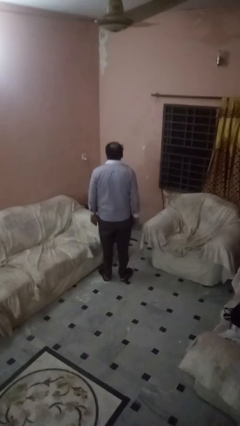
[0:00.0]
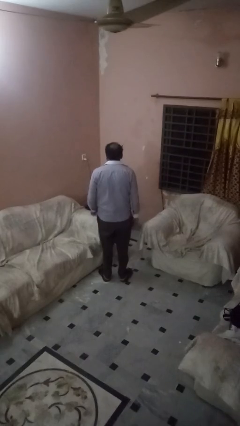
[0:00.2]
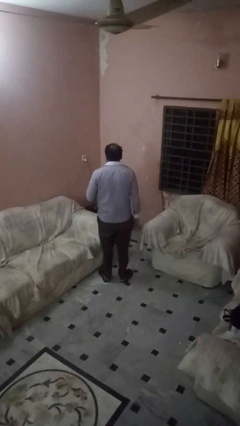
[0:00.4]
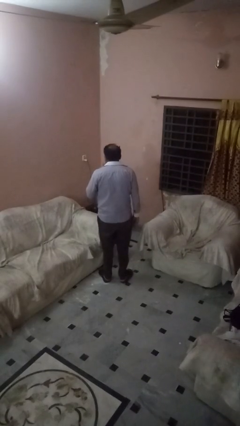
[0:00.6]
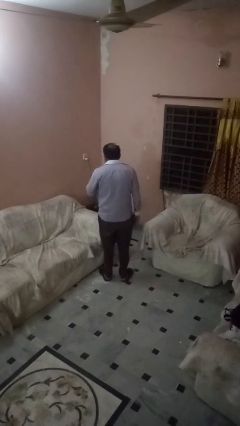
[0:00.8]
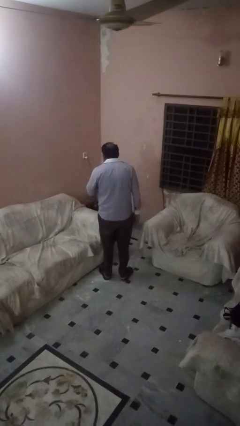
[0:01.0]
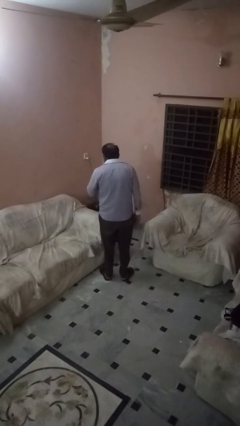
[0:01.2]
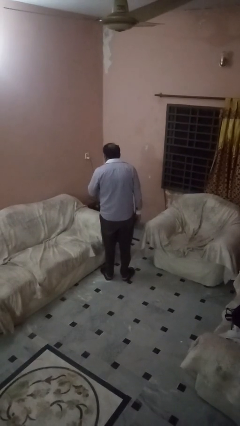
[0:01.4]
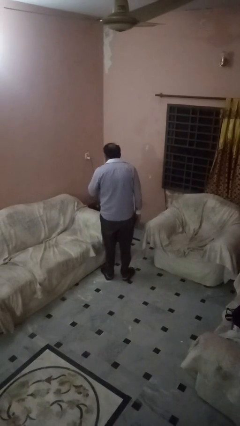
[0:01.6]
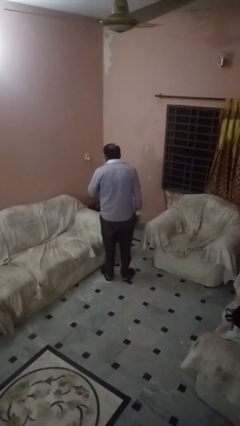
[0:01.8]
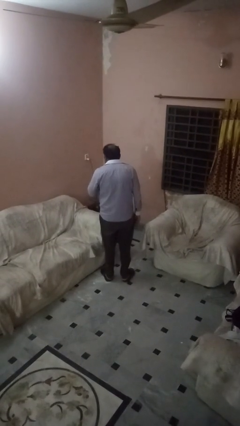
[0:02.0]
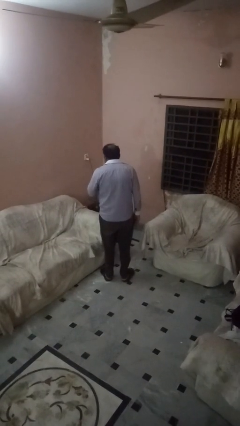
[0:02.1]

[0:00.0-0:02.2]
person gestures be quiet

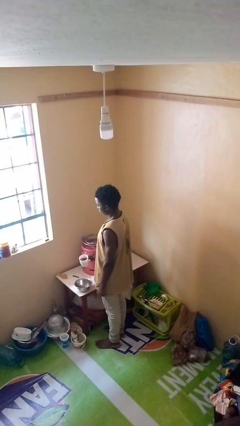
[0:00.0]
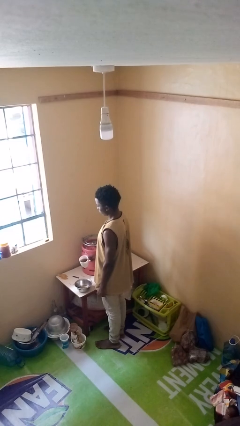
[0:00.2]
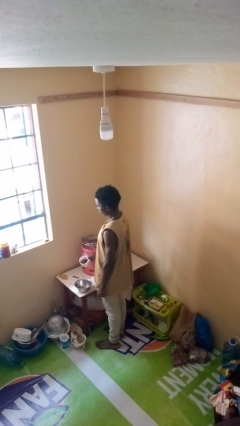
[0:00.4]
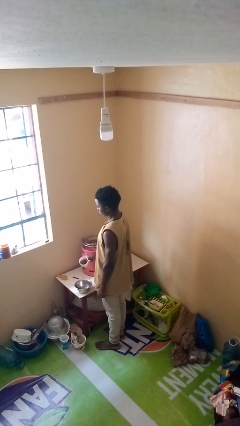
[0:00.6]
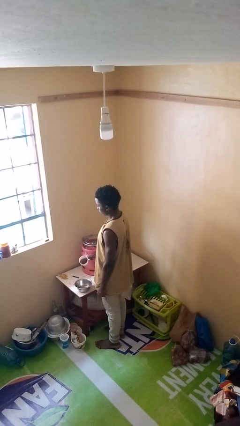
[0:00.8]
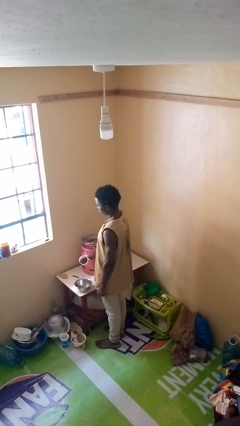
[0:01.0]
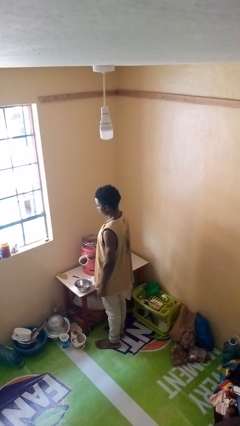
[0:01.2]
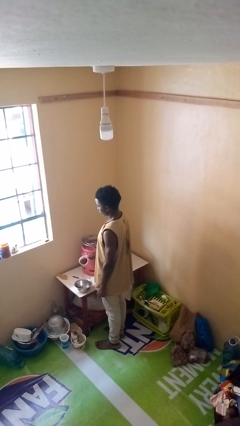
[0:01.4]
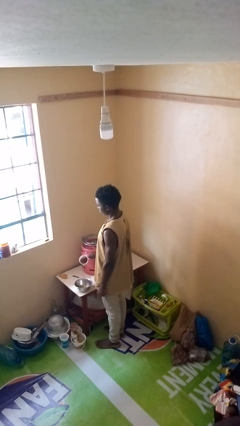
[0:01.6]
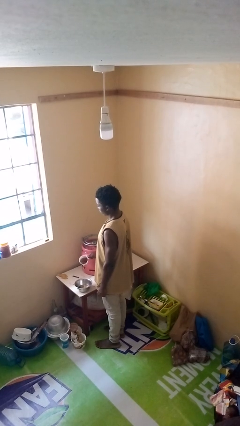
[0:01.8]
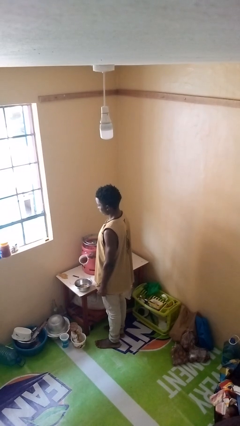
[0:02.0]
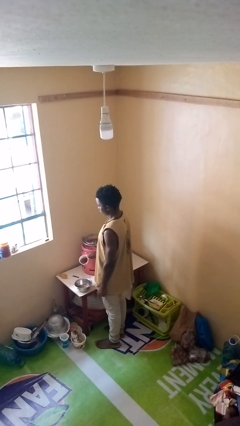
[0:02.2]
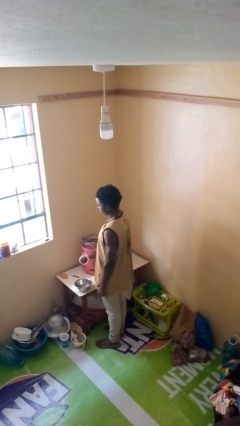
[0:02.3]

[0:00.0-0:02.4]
person pours into bowl

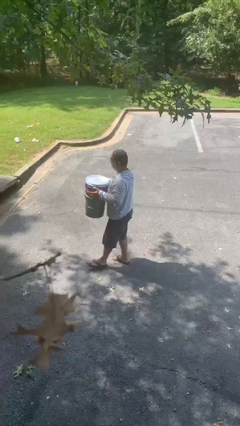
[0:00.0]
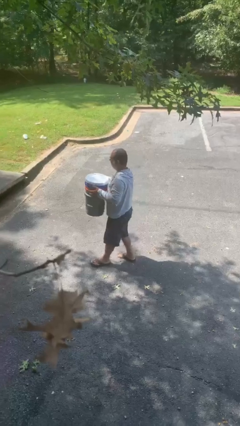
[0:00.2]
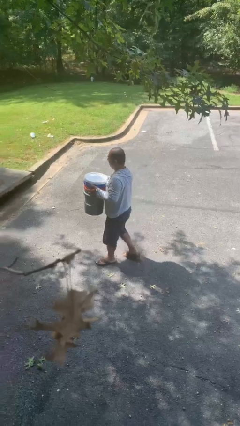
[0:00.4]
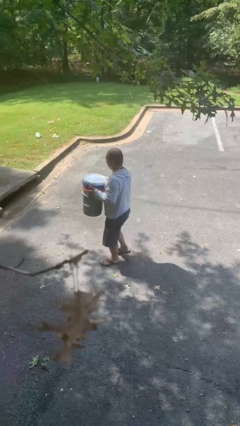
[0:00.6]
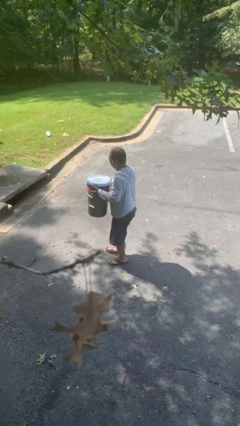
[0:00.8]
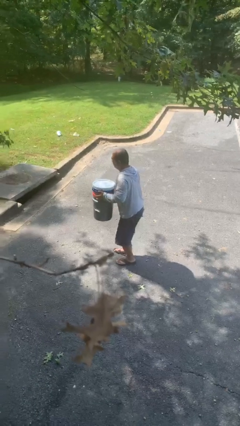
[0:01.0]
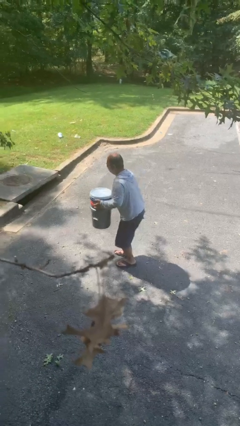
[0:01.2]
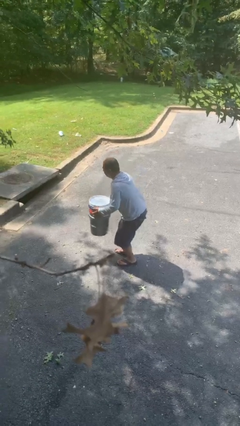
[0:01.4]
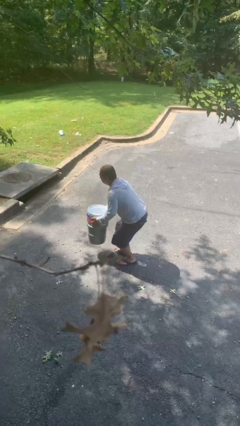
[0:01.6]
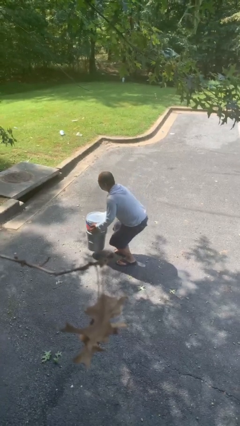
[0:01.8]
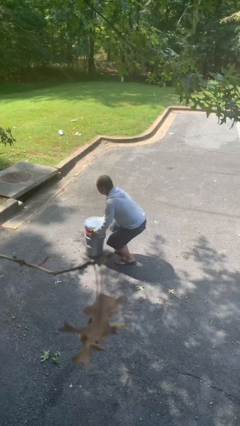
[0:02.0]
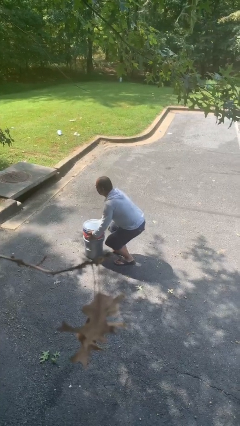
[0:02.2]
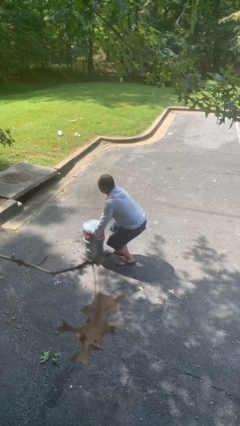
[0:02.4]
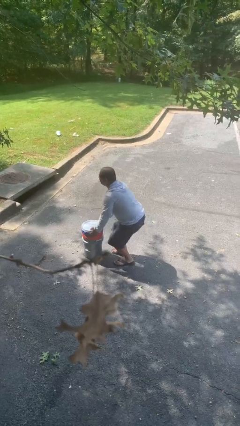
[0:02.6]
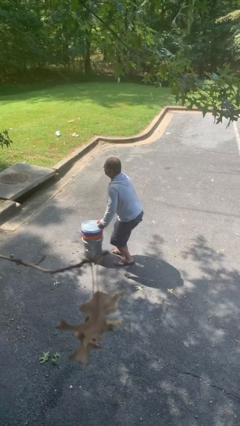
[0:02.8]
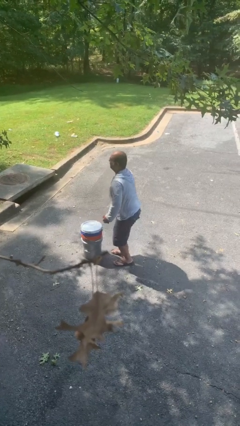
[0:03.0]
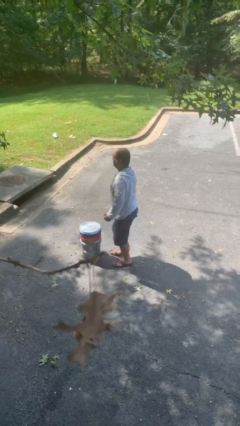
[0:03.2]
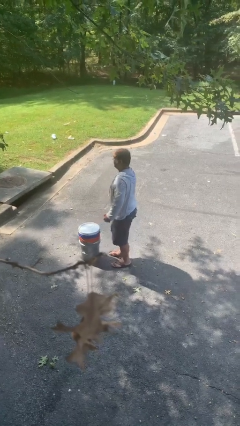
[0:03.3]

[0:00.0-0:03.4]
person puts down object on floor

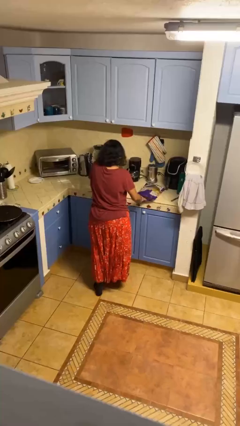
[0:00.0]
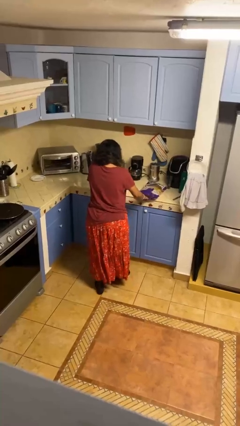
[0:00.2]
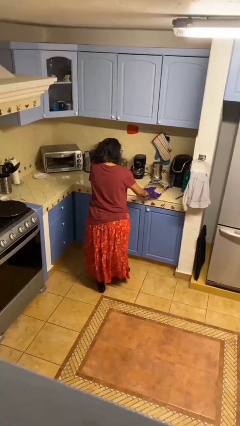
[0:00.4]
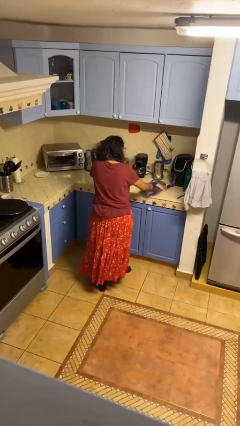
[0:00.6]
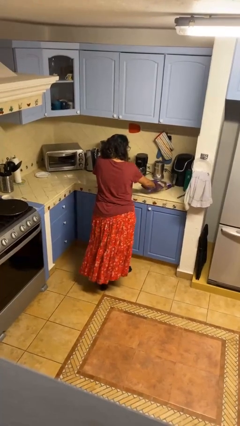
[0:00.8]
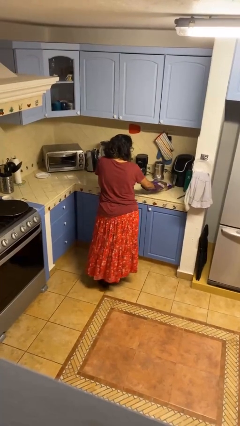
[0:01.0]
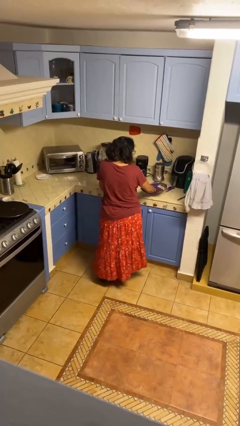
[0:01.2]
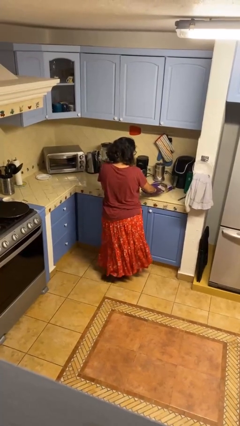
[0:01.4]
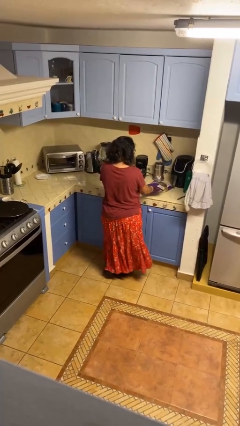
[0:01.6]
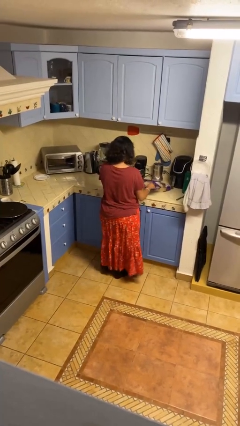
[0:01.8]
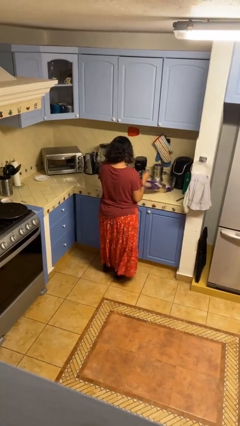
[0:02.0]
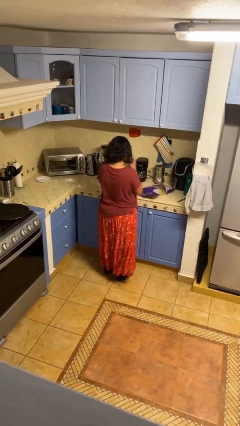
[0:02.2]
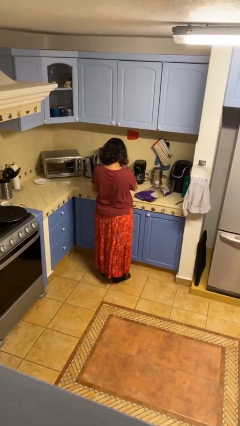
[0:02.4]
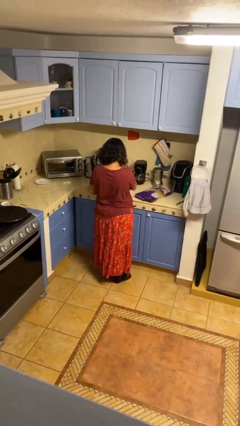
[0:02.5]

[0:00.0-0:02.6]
person eats snack from bag

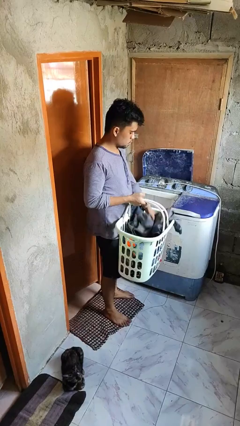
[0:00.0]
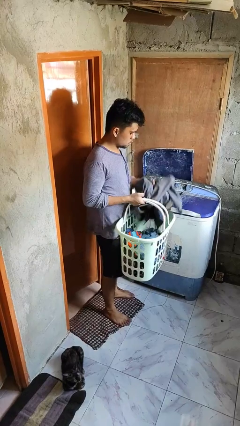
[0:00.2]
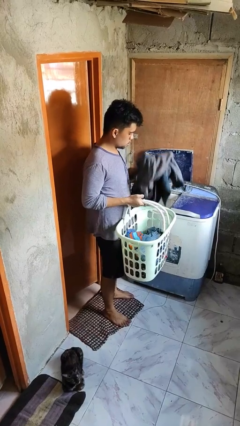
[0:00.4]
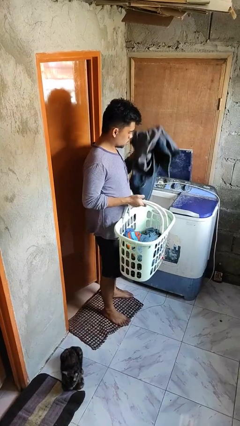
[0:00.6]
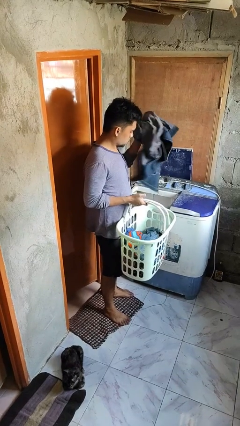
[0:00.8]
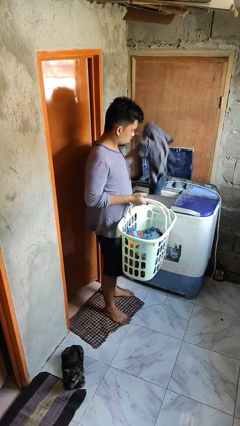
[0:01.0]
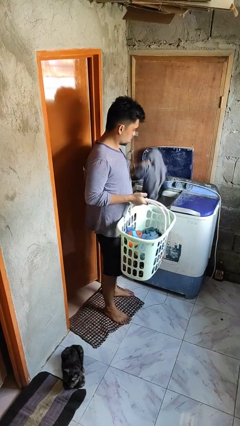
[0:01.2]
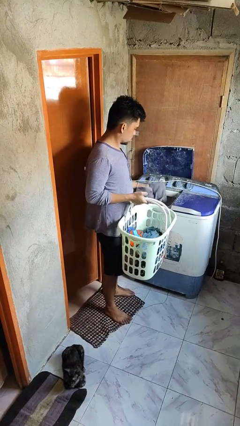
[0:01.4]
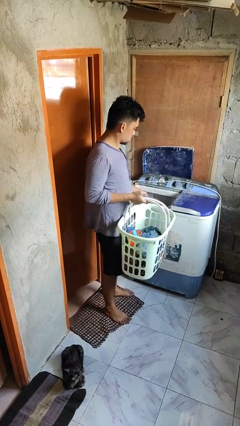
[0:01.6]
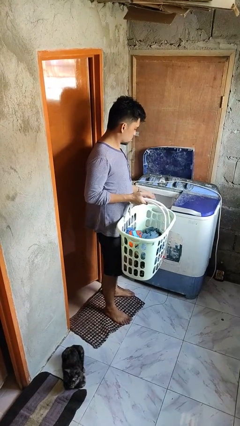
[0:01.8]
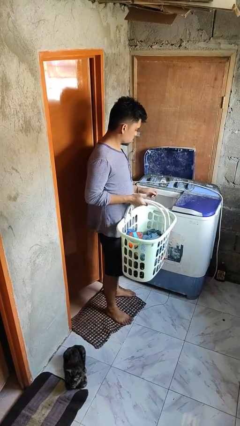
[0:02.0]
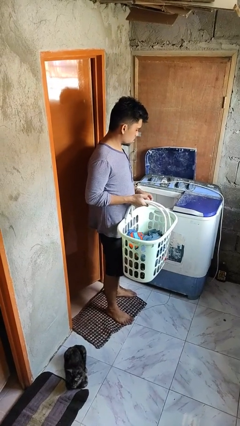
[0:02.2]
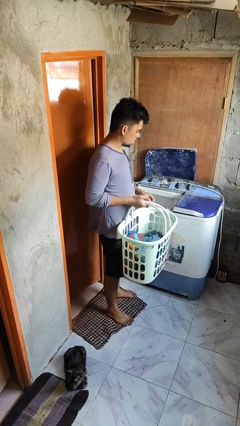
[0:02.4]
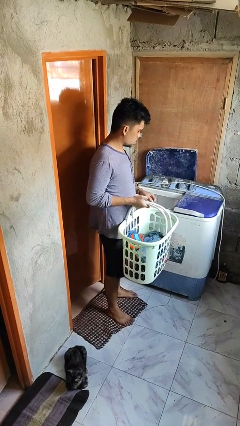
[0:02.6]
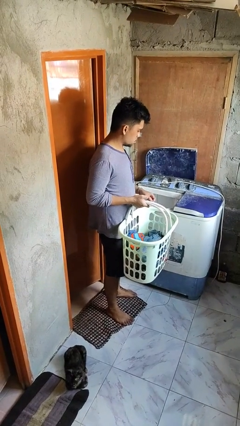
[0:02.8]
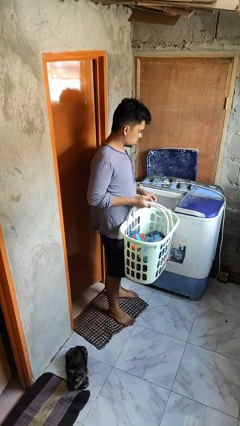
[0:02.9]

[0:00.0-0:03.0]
person loads clotheswasher

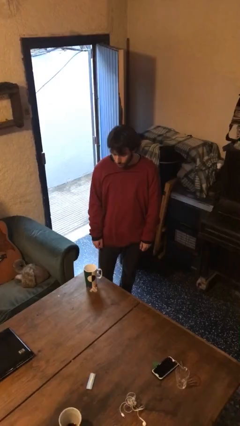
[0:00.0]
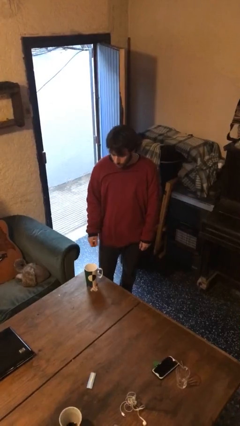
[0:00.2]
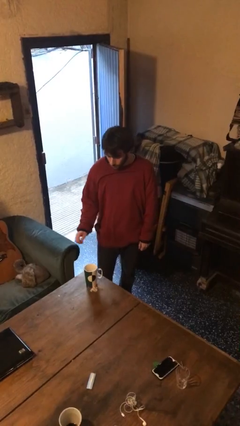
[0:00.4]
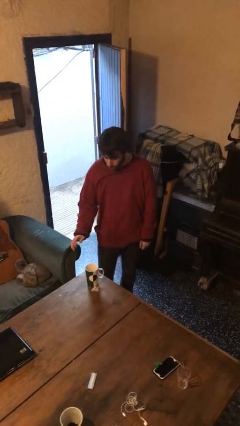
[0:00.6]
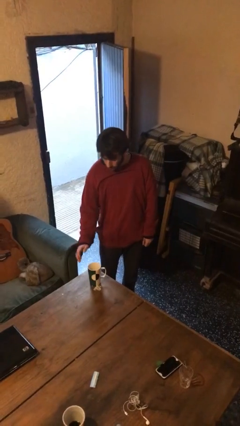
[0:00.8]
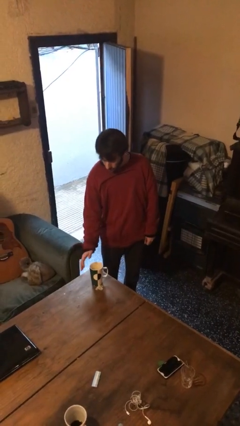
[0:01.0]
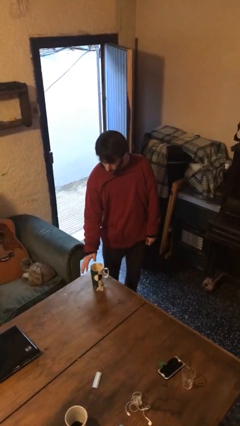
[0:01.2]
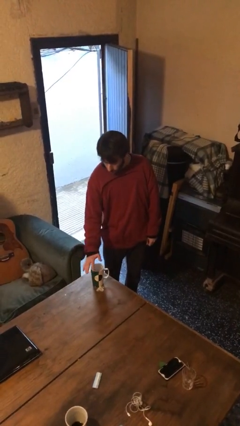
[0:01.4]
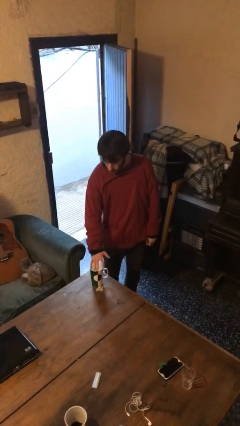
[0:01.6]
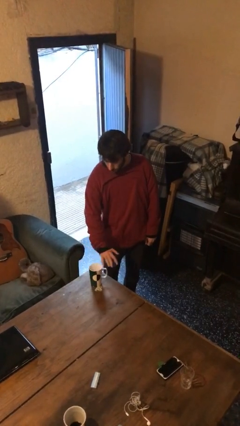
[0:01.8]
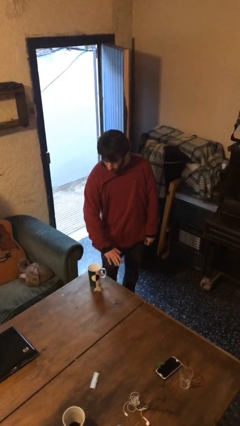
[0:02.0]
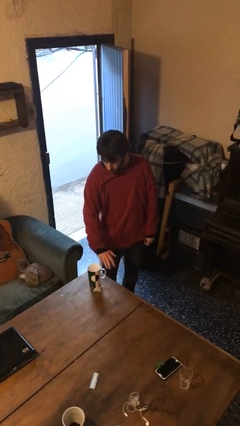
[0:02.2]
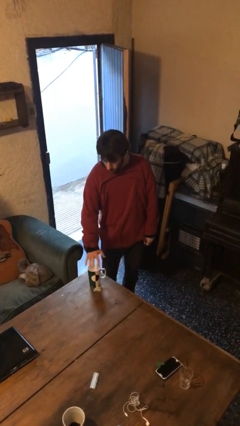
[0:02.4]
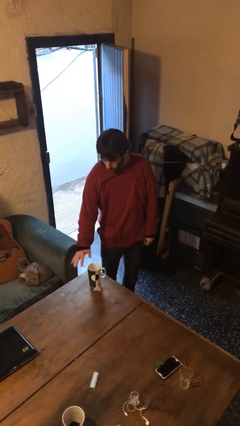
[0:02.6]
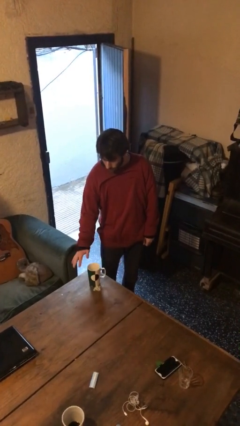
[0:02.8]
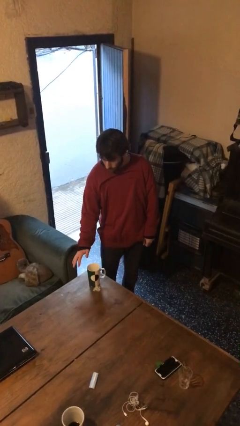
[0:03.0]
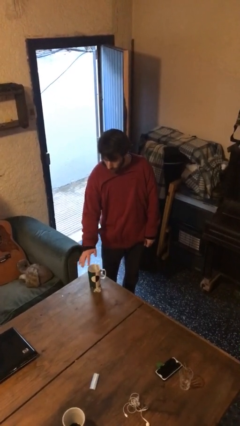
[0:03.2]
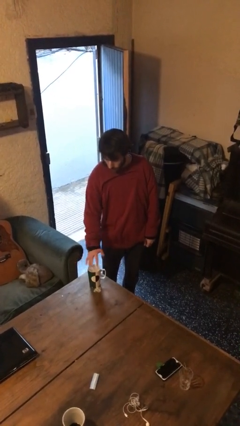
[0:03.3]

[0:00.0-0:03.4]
person waves hand over object
